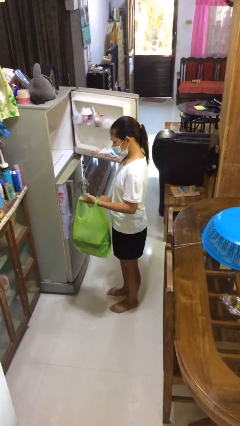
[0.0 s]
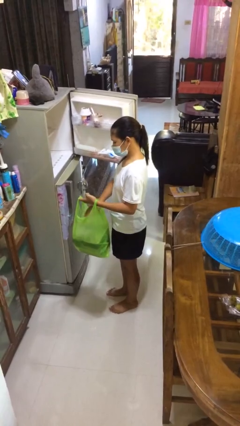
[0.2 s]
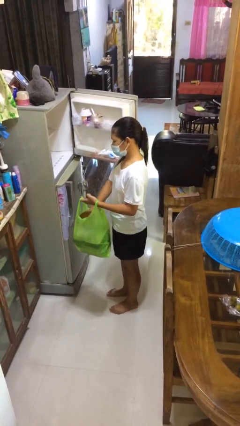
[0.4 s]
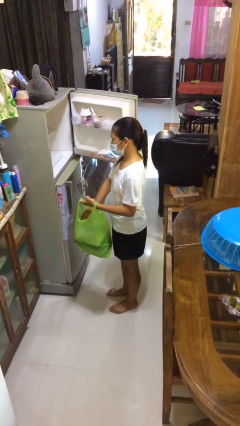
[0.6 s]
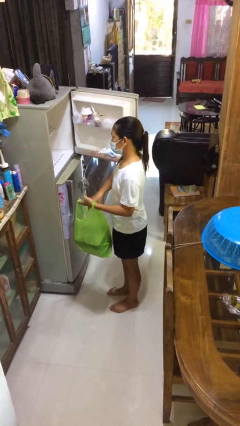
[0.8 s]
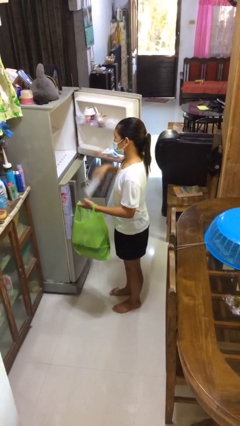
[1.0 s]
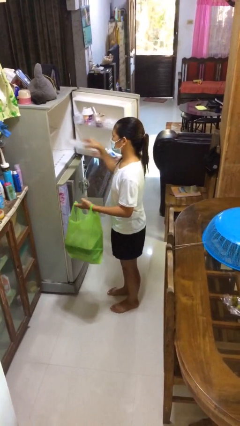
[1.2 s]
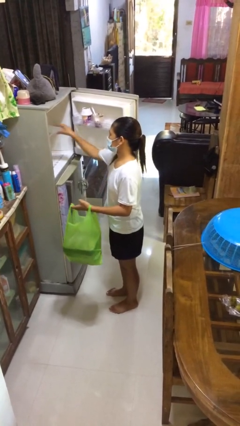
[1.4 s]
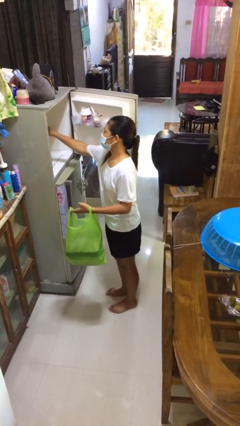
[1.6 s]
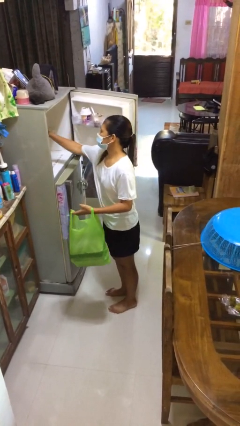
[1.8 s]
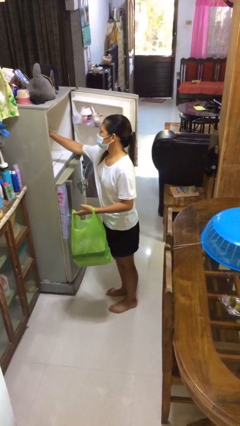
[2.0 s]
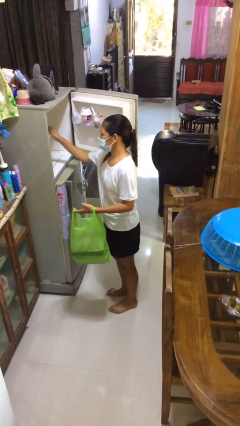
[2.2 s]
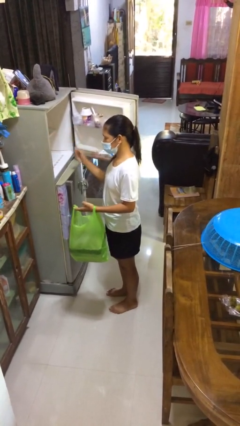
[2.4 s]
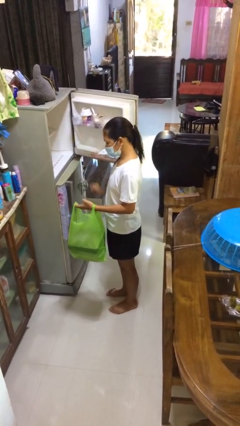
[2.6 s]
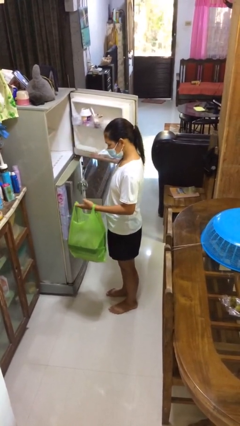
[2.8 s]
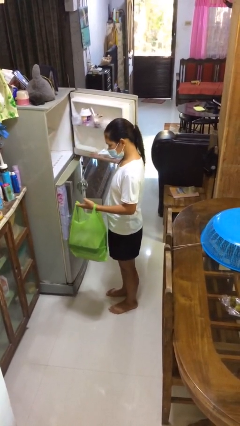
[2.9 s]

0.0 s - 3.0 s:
person loads groceries into refrigerator

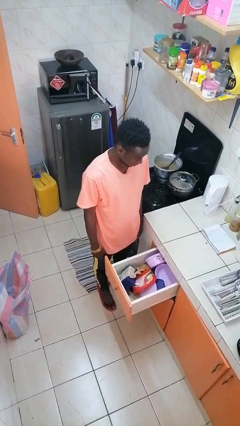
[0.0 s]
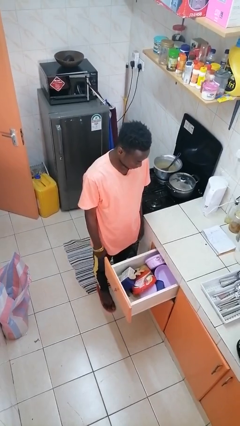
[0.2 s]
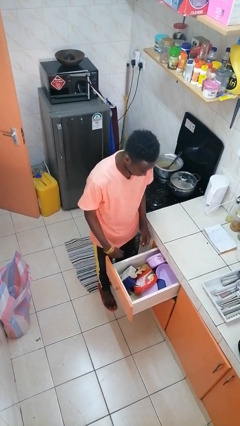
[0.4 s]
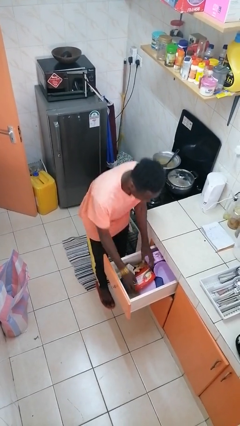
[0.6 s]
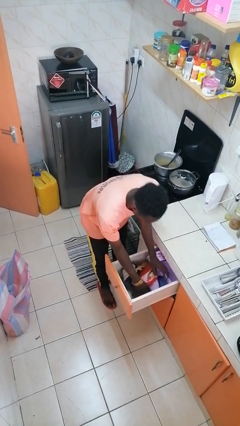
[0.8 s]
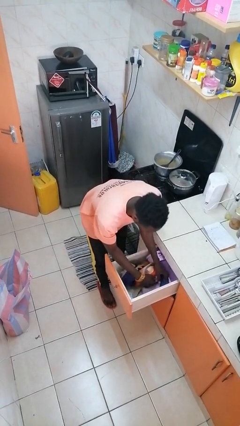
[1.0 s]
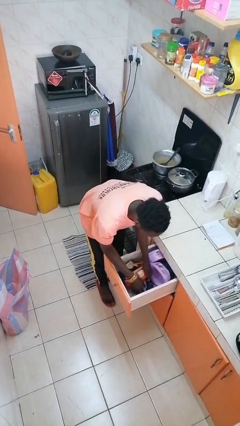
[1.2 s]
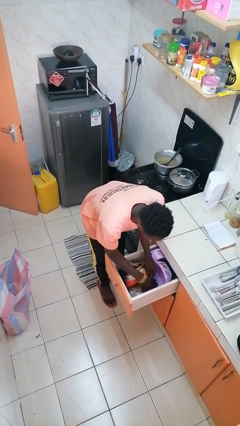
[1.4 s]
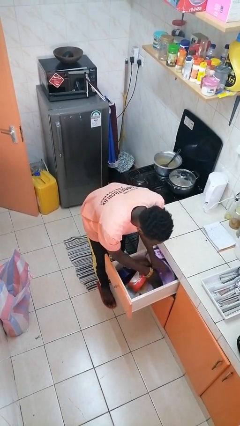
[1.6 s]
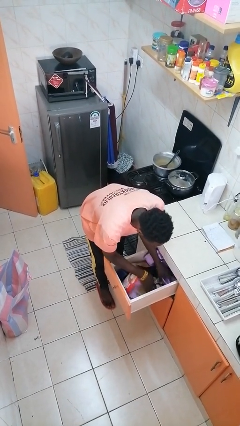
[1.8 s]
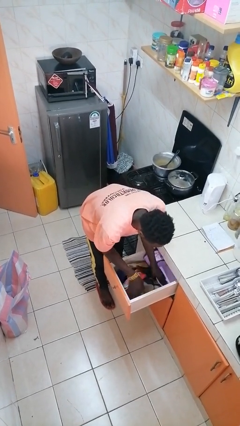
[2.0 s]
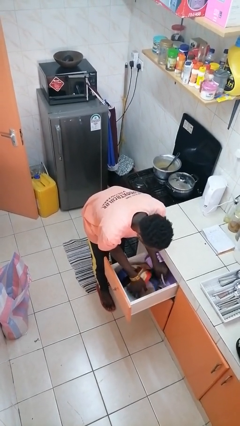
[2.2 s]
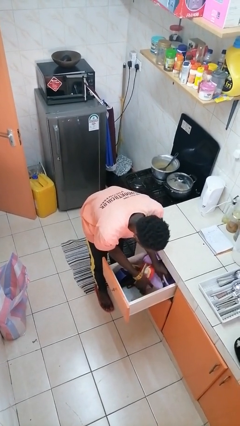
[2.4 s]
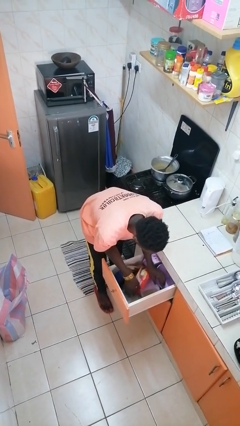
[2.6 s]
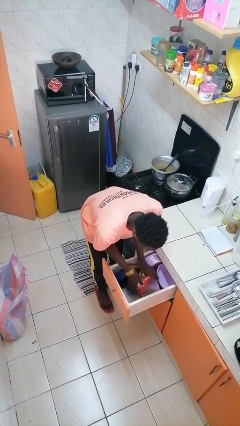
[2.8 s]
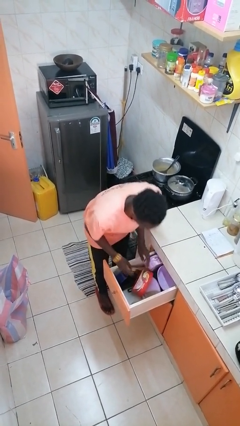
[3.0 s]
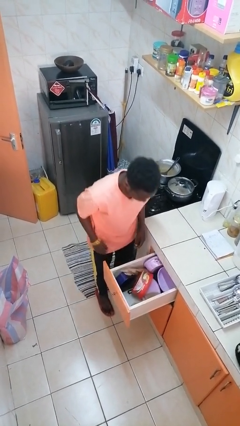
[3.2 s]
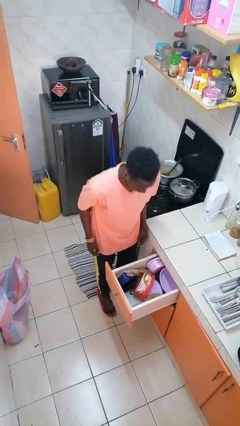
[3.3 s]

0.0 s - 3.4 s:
person searches in kitchen drawer

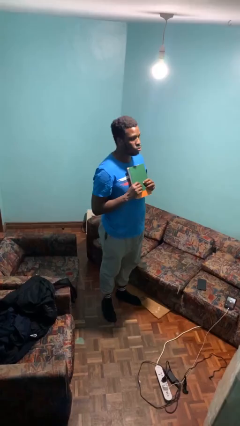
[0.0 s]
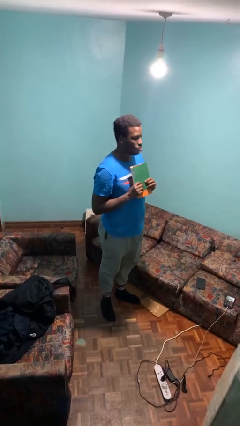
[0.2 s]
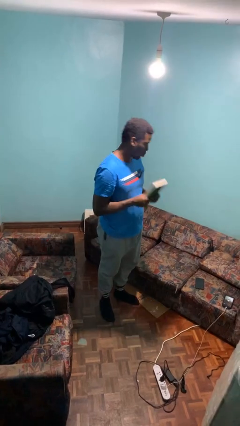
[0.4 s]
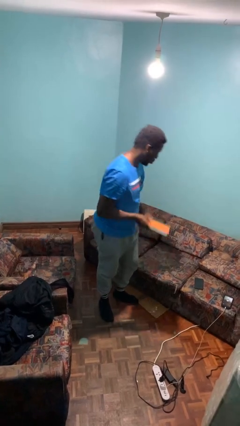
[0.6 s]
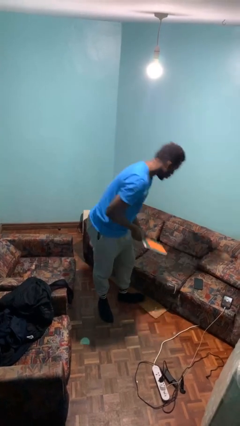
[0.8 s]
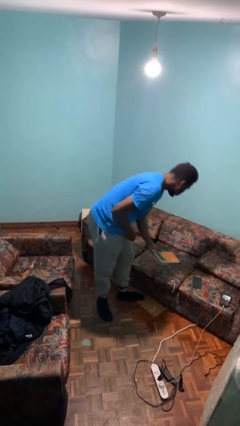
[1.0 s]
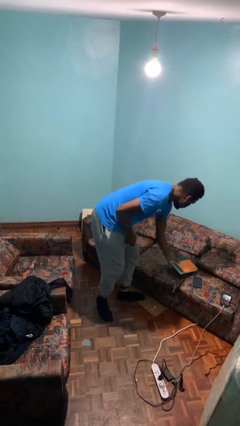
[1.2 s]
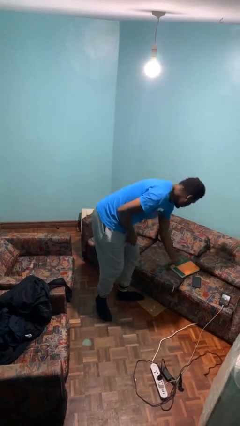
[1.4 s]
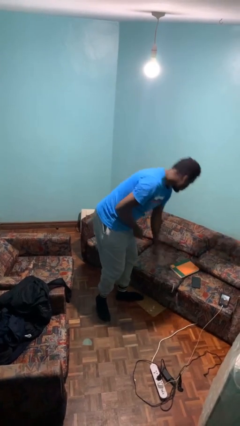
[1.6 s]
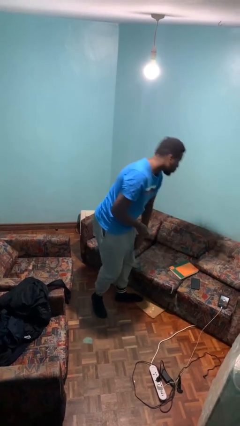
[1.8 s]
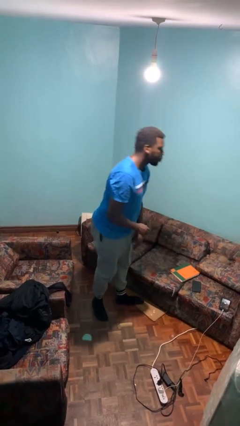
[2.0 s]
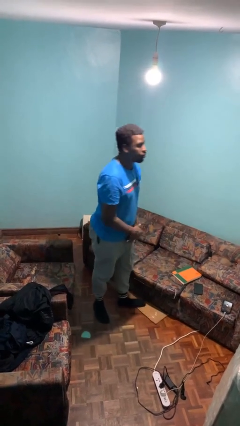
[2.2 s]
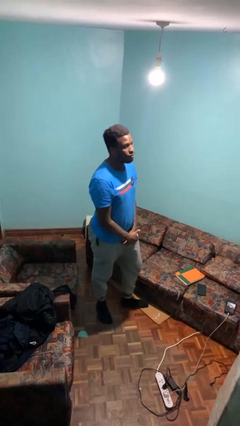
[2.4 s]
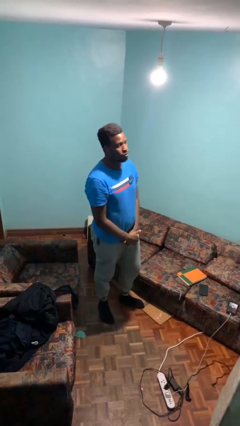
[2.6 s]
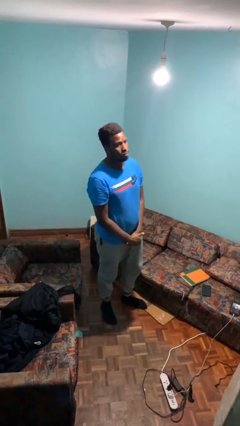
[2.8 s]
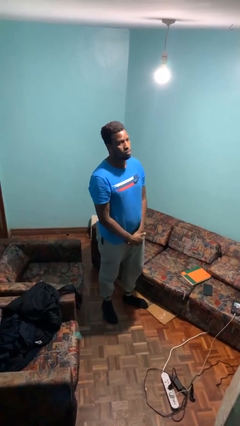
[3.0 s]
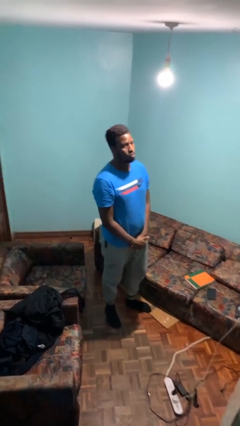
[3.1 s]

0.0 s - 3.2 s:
person puts down object on couch

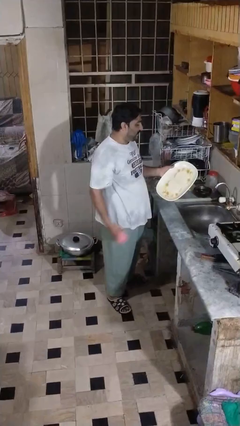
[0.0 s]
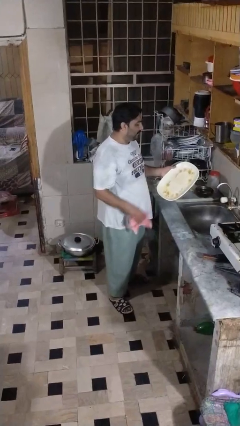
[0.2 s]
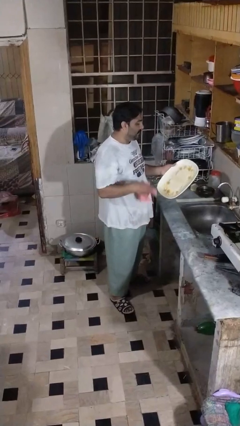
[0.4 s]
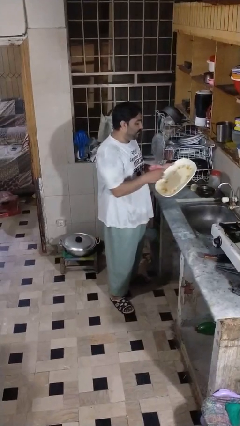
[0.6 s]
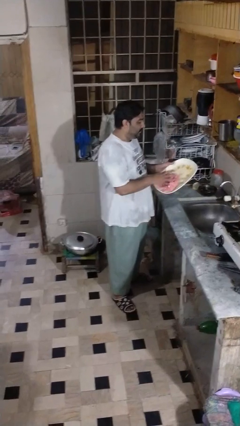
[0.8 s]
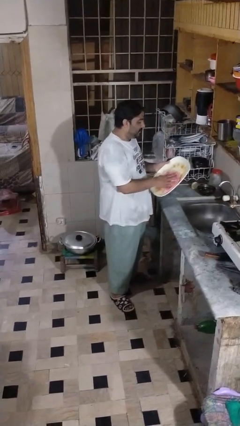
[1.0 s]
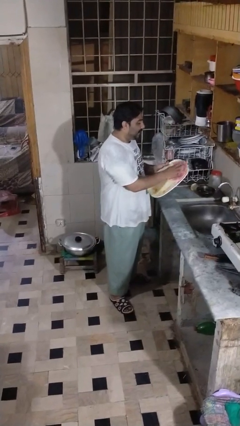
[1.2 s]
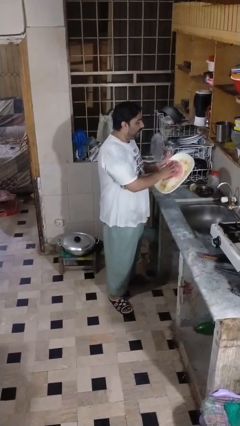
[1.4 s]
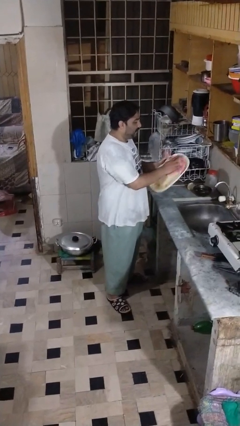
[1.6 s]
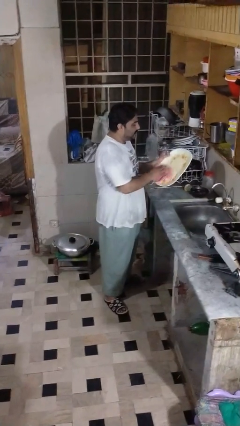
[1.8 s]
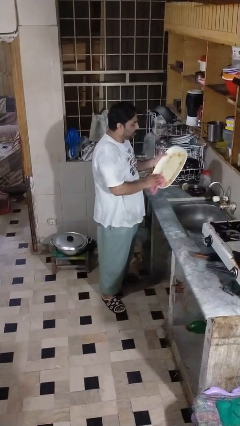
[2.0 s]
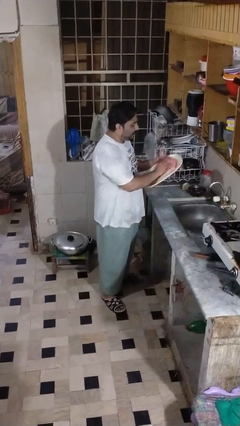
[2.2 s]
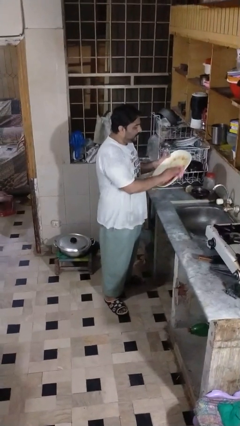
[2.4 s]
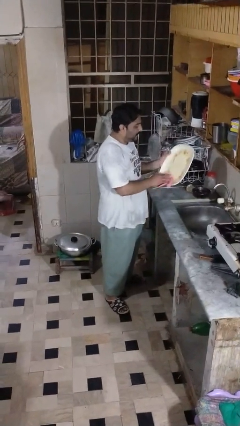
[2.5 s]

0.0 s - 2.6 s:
person dries dish

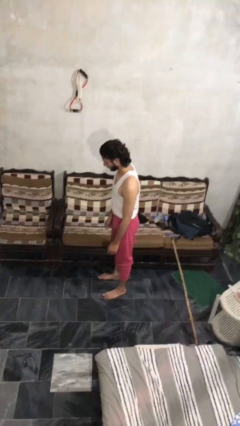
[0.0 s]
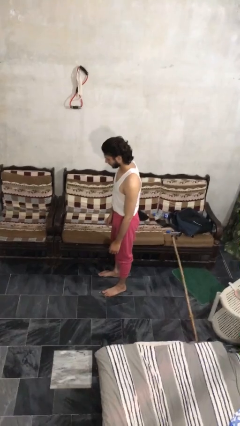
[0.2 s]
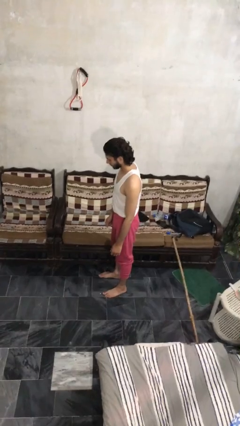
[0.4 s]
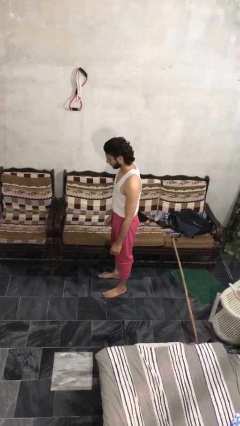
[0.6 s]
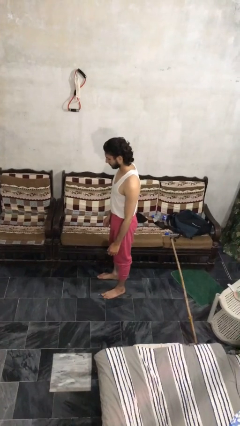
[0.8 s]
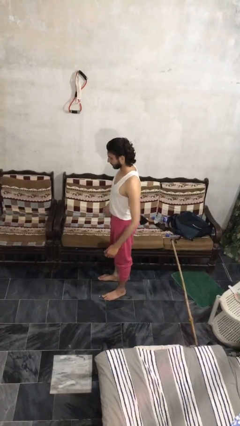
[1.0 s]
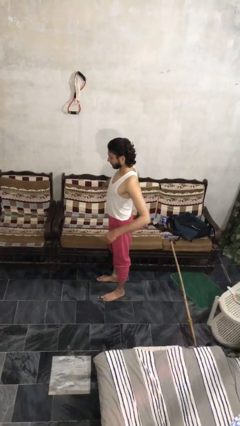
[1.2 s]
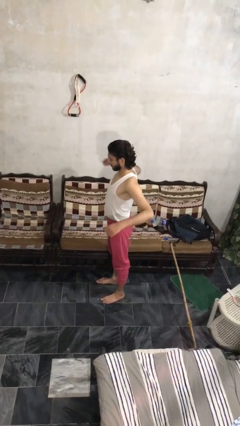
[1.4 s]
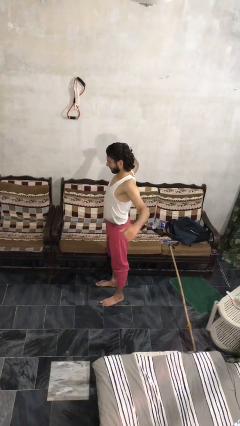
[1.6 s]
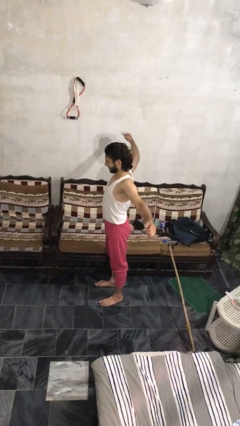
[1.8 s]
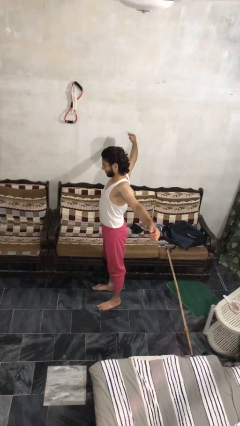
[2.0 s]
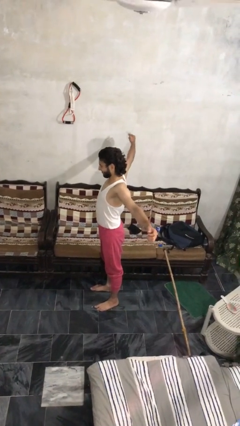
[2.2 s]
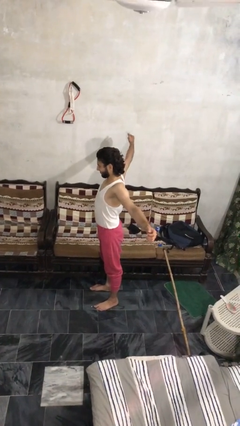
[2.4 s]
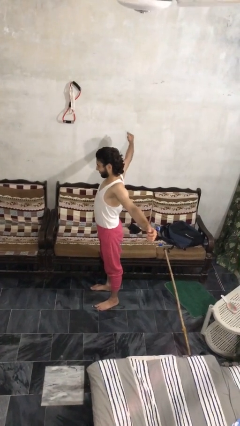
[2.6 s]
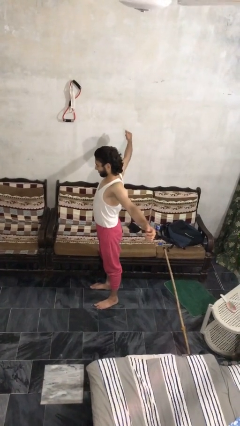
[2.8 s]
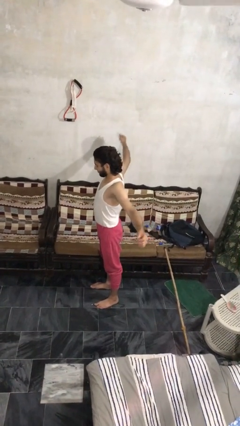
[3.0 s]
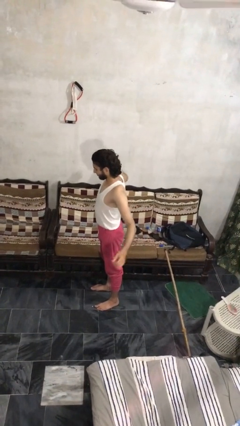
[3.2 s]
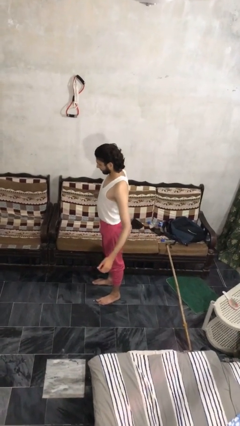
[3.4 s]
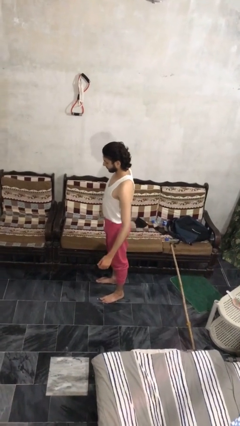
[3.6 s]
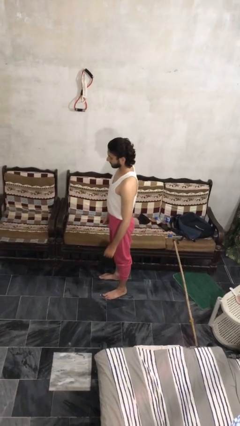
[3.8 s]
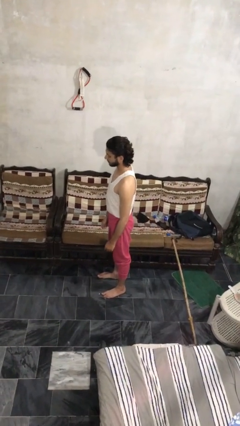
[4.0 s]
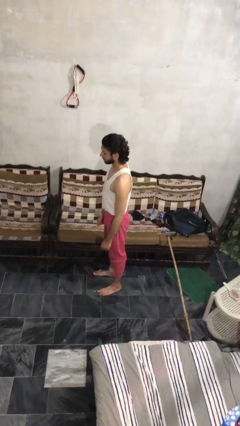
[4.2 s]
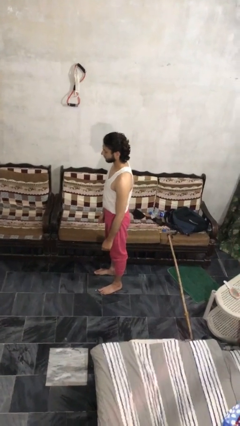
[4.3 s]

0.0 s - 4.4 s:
person stretches arms to side

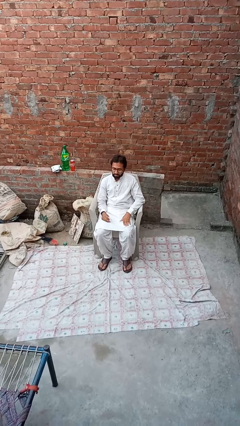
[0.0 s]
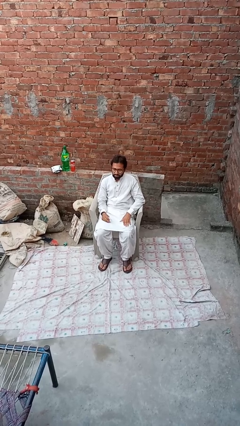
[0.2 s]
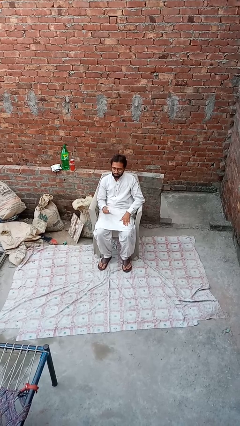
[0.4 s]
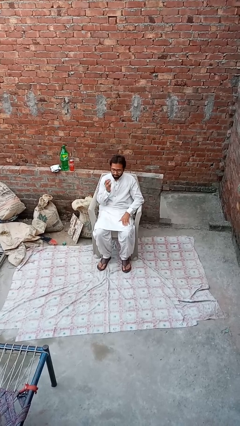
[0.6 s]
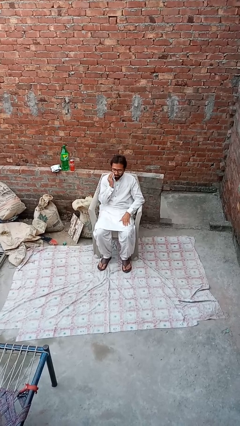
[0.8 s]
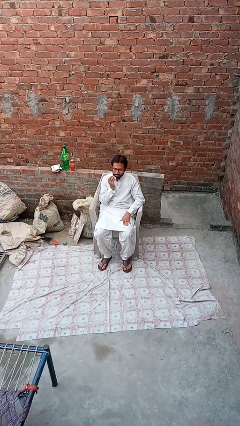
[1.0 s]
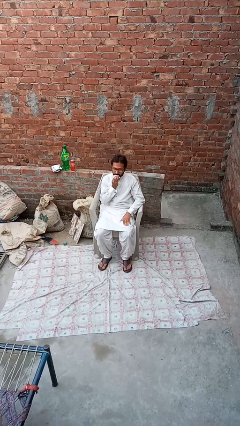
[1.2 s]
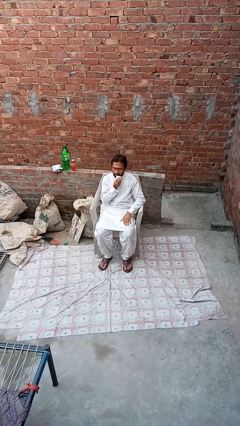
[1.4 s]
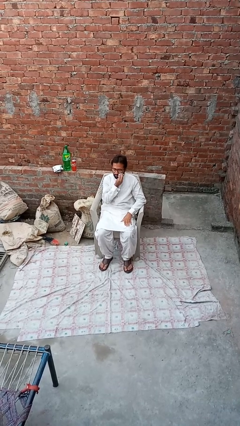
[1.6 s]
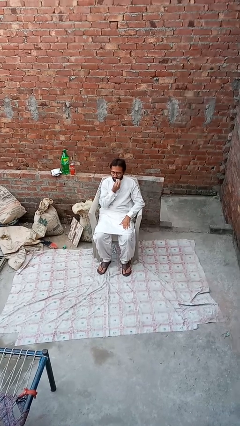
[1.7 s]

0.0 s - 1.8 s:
person wipes mouth with napkin
